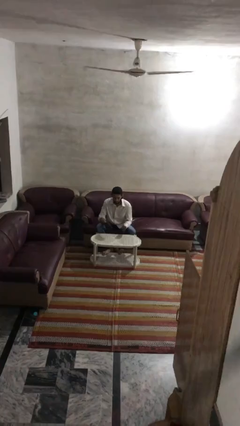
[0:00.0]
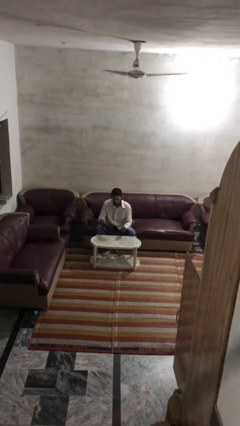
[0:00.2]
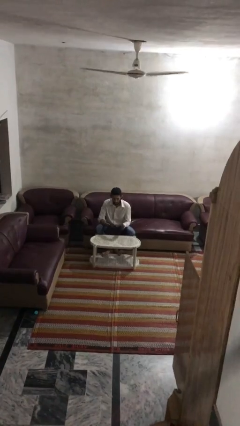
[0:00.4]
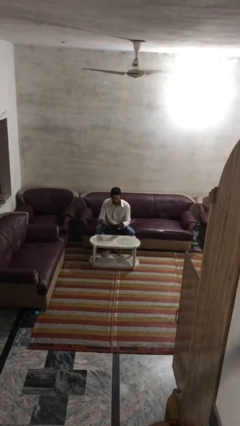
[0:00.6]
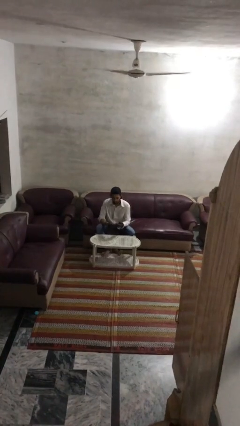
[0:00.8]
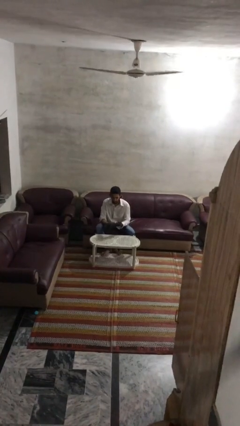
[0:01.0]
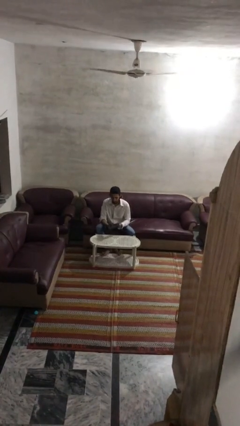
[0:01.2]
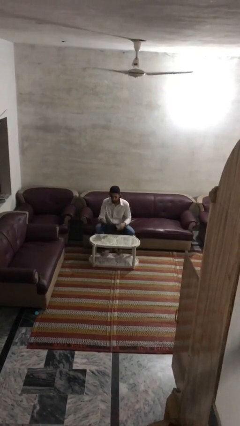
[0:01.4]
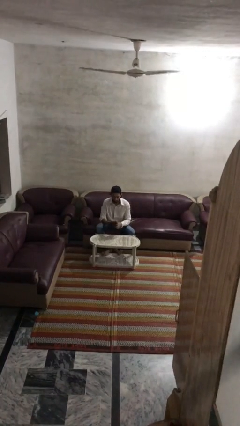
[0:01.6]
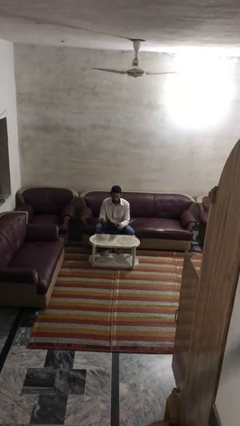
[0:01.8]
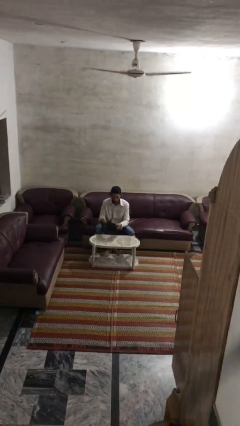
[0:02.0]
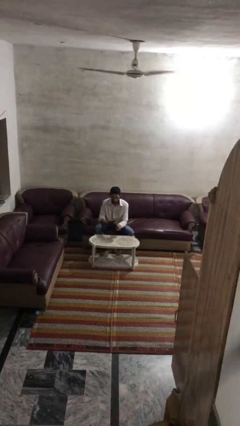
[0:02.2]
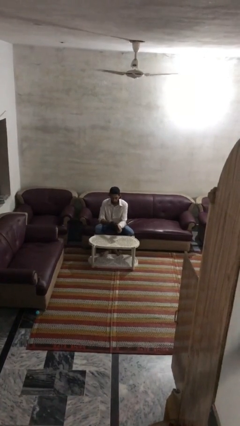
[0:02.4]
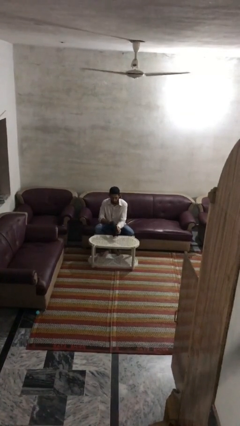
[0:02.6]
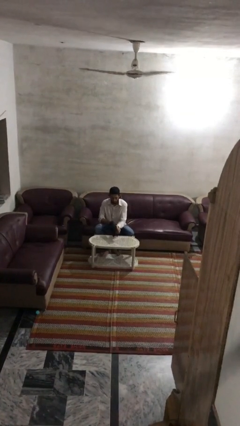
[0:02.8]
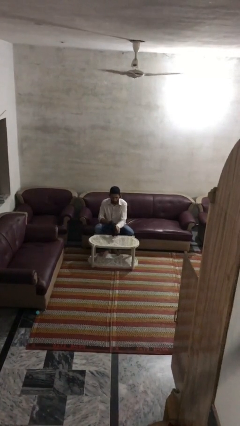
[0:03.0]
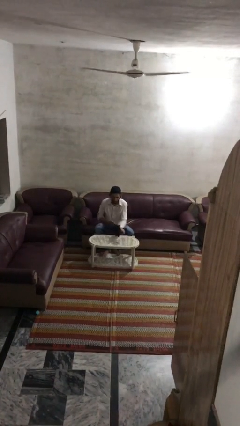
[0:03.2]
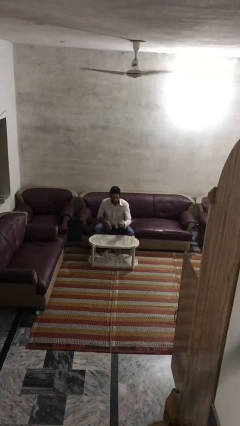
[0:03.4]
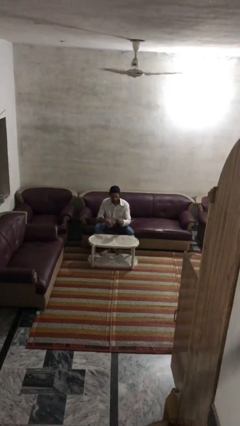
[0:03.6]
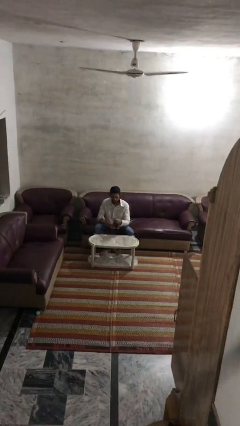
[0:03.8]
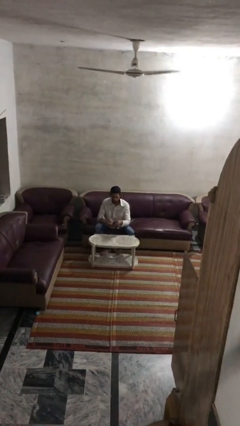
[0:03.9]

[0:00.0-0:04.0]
person takes off gloves

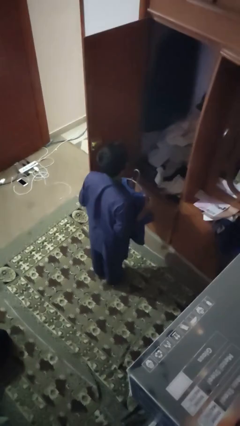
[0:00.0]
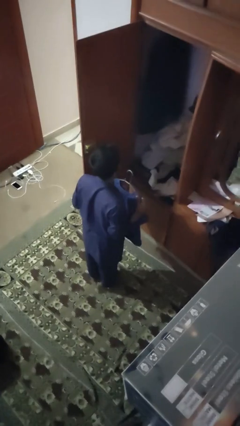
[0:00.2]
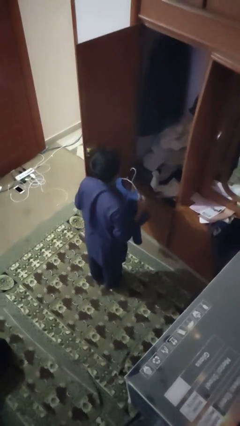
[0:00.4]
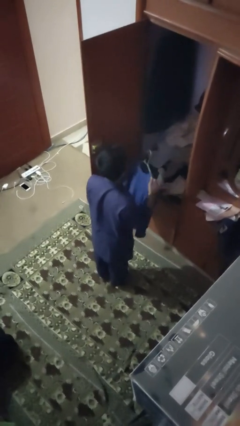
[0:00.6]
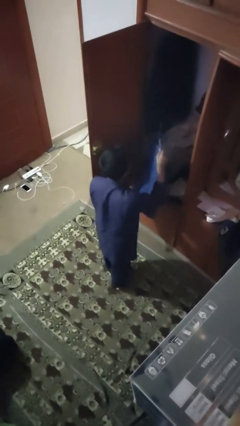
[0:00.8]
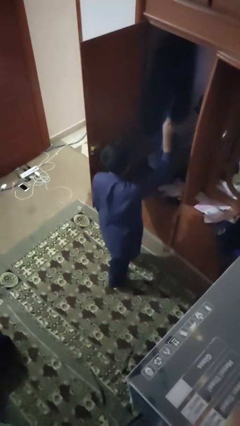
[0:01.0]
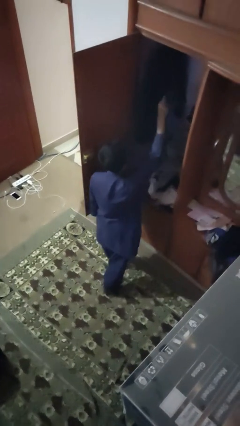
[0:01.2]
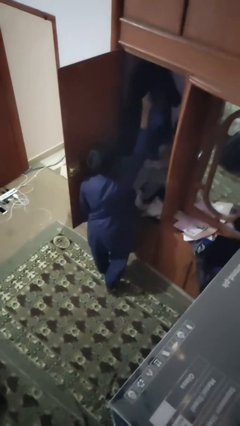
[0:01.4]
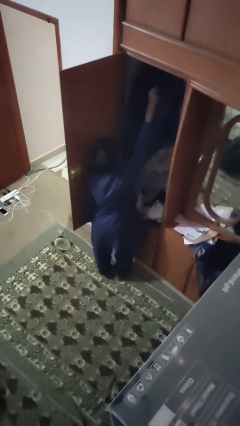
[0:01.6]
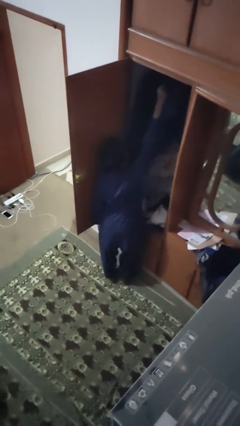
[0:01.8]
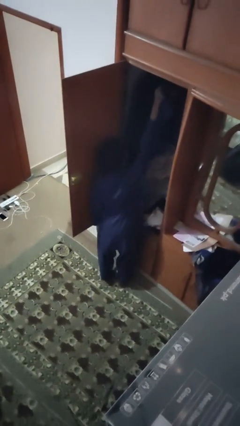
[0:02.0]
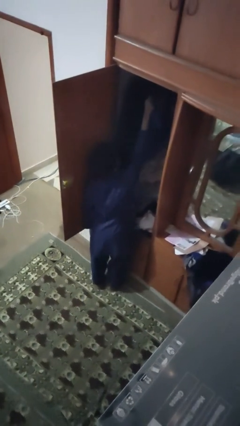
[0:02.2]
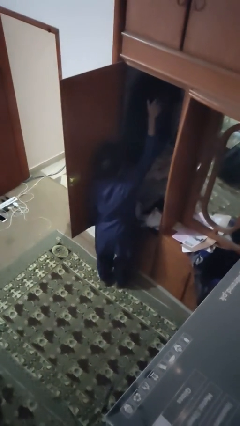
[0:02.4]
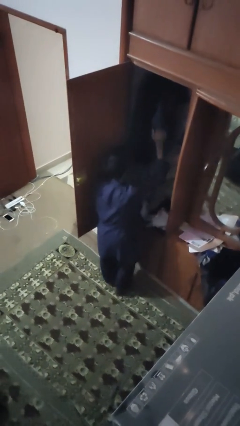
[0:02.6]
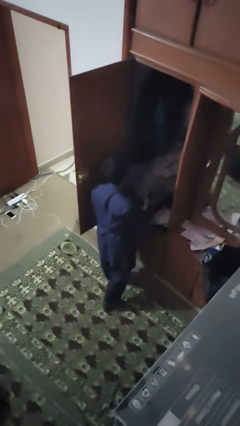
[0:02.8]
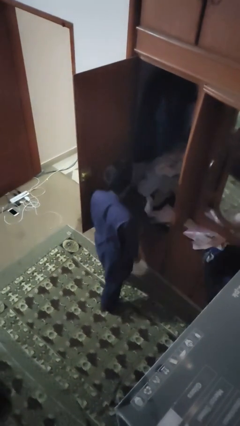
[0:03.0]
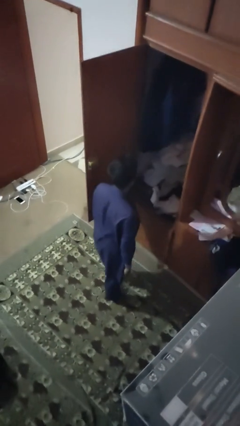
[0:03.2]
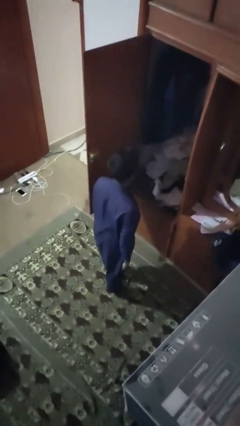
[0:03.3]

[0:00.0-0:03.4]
person puts clothes into closet

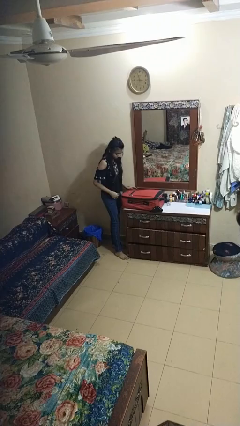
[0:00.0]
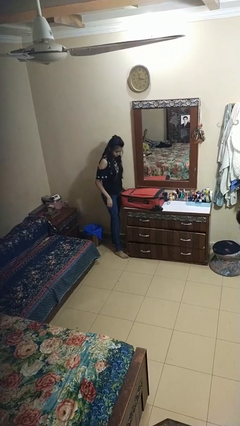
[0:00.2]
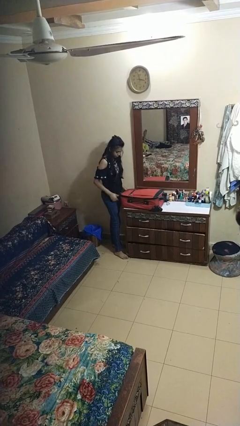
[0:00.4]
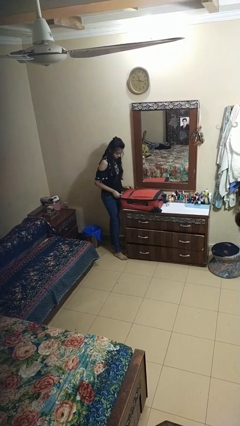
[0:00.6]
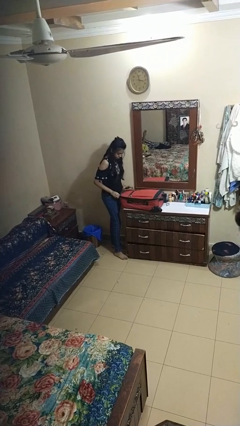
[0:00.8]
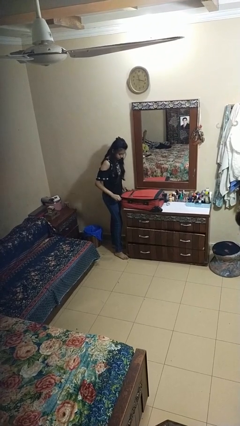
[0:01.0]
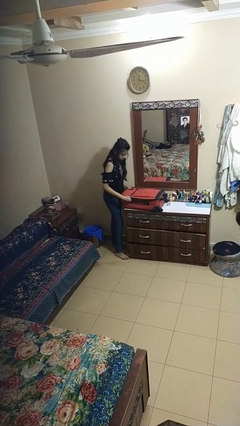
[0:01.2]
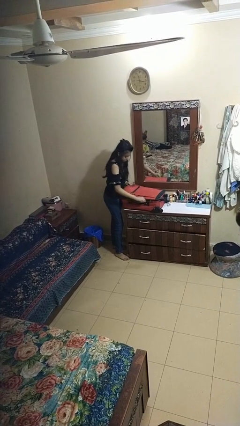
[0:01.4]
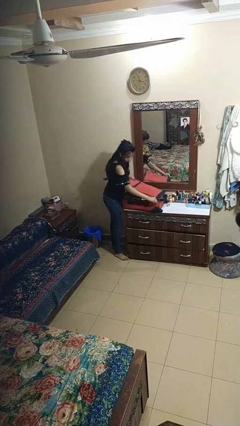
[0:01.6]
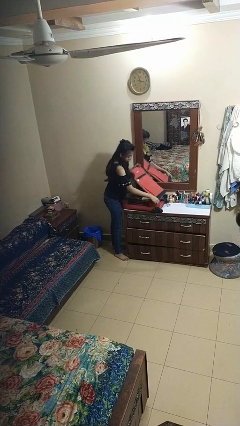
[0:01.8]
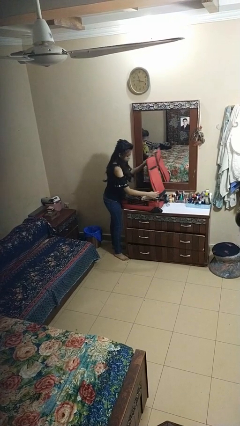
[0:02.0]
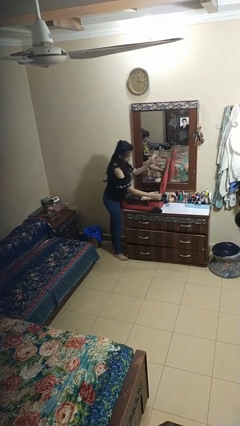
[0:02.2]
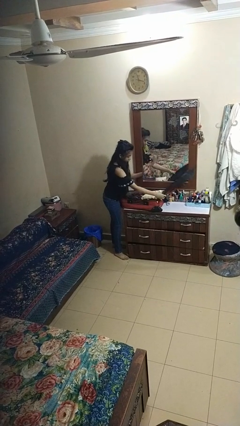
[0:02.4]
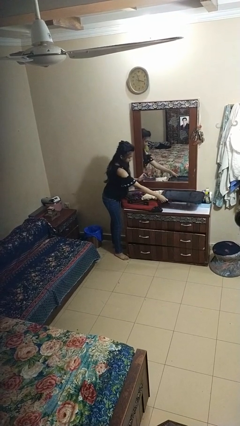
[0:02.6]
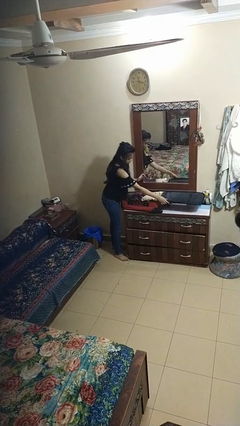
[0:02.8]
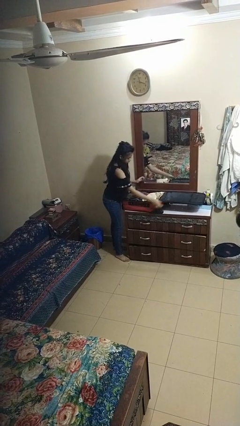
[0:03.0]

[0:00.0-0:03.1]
person opens suitcase

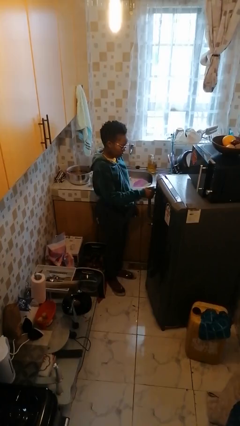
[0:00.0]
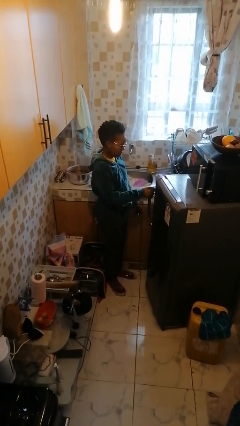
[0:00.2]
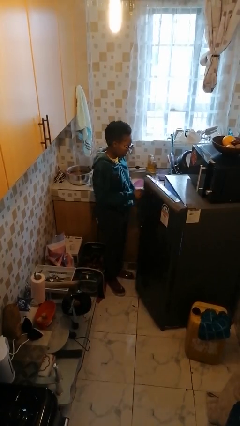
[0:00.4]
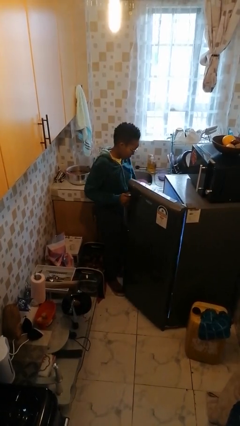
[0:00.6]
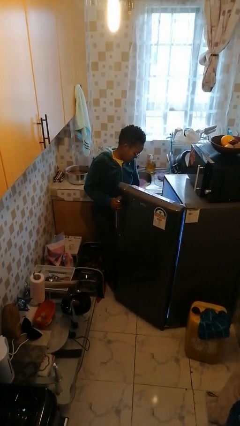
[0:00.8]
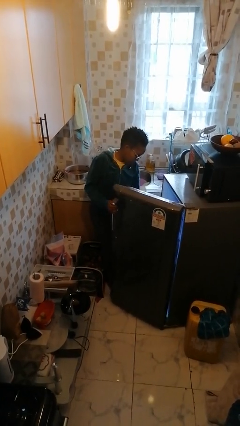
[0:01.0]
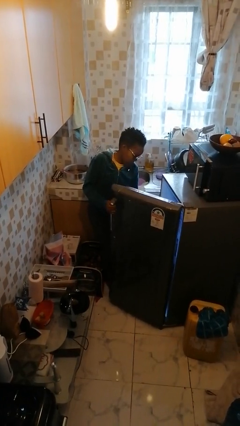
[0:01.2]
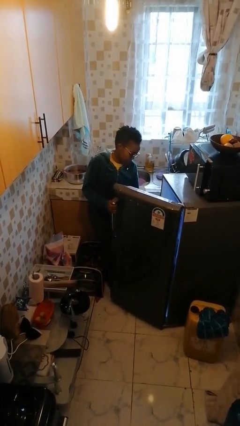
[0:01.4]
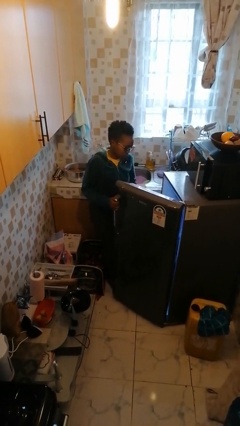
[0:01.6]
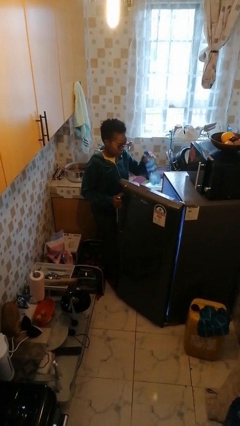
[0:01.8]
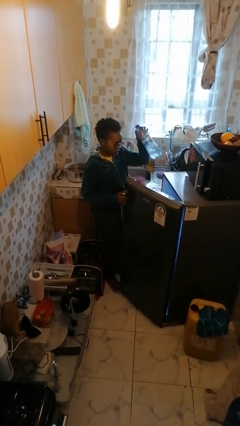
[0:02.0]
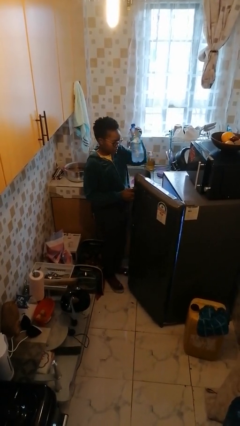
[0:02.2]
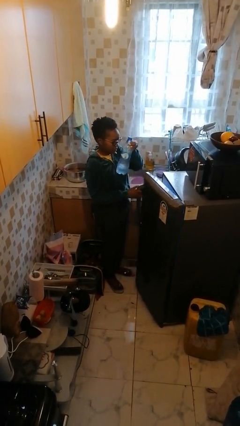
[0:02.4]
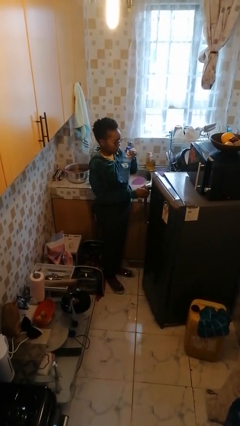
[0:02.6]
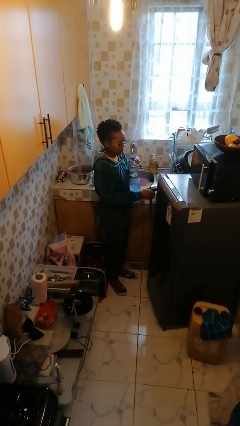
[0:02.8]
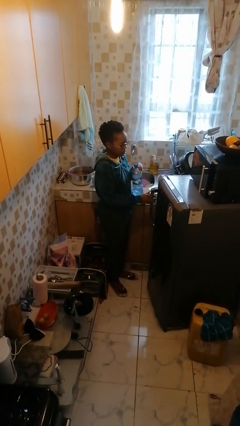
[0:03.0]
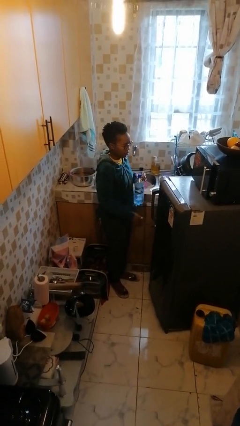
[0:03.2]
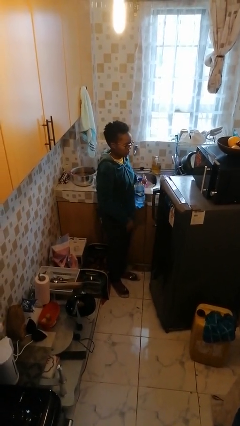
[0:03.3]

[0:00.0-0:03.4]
person takes object from refrigerator

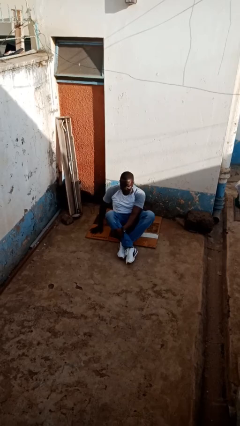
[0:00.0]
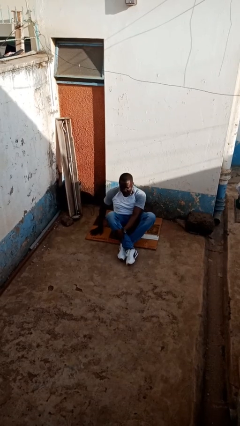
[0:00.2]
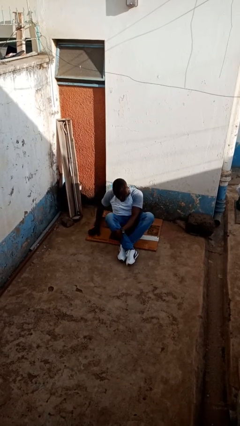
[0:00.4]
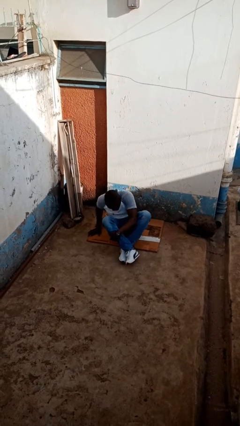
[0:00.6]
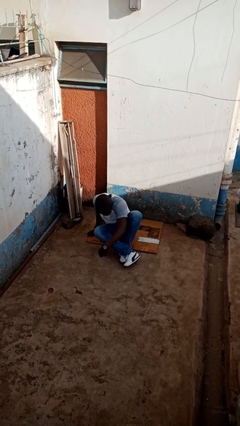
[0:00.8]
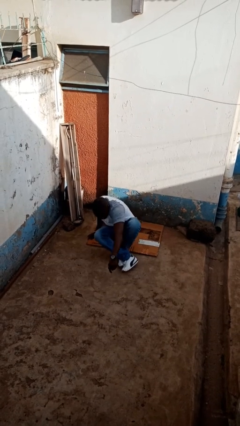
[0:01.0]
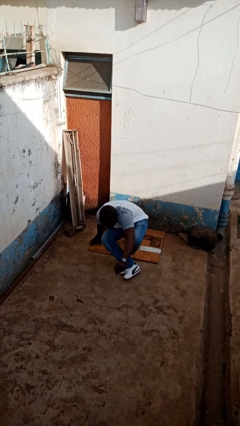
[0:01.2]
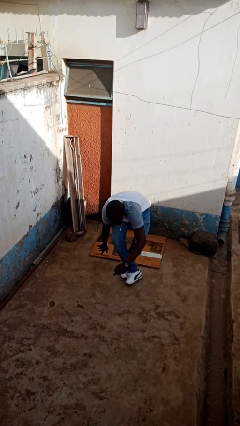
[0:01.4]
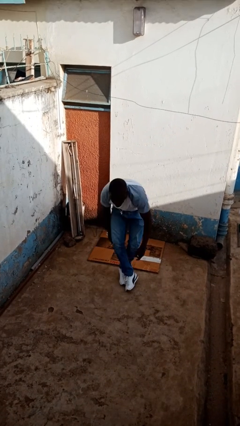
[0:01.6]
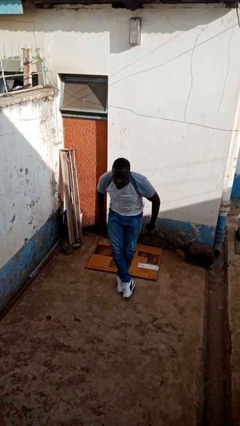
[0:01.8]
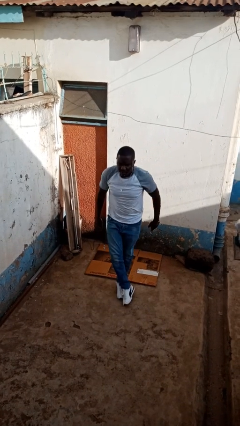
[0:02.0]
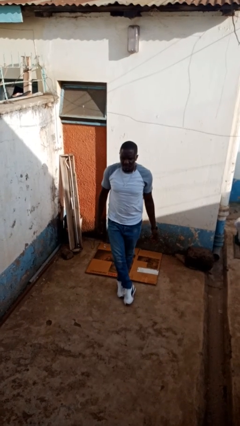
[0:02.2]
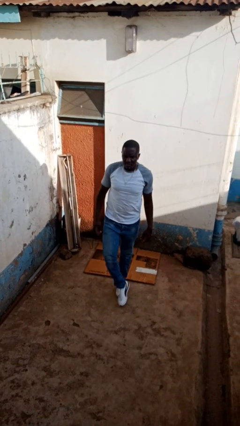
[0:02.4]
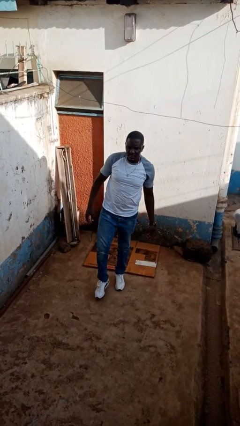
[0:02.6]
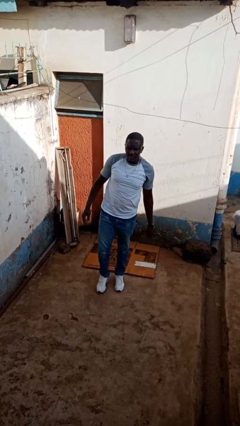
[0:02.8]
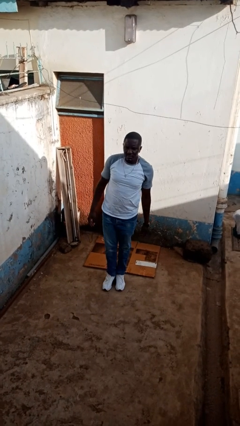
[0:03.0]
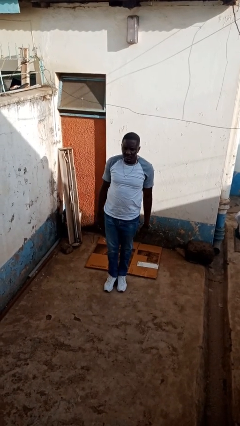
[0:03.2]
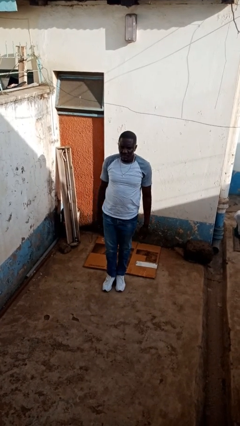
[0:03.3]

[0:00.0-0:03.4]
person stands up from floor

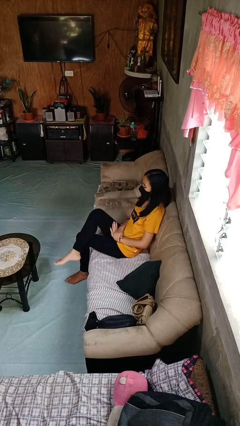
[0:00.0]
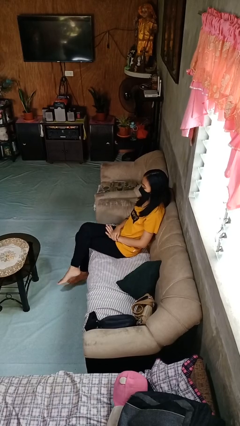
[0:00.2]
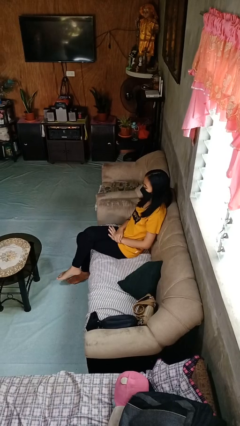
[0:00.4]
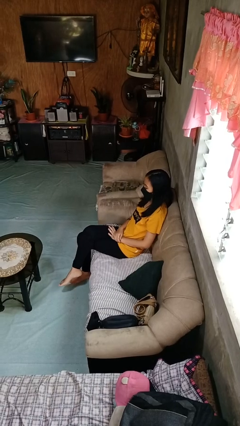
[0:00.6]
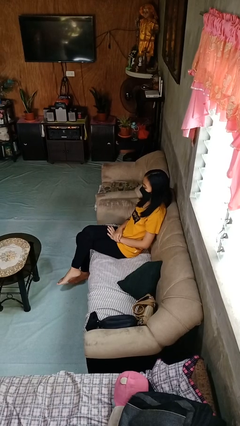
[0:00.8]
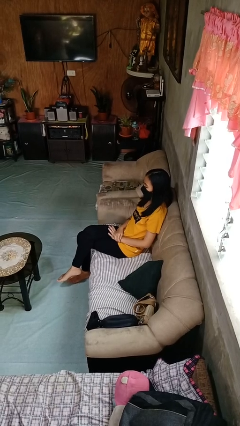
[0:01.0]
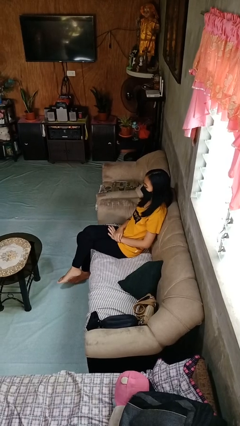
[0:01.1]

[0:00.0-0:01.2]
person crosses legs
